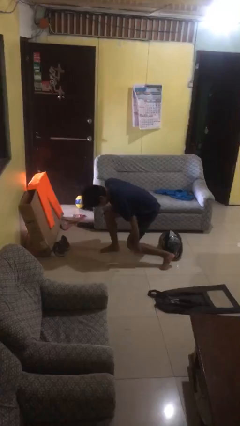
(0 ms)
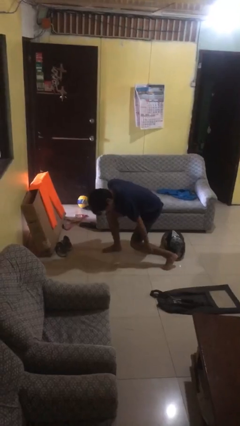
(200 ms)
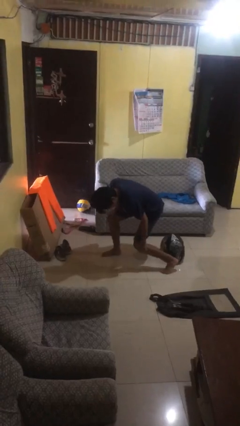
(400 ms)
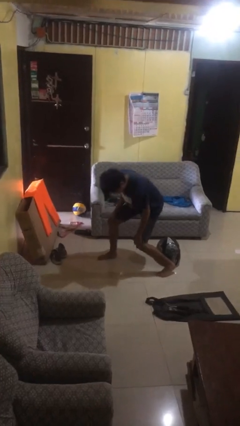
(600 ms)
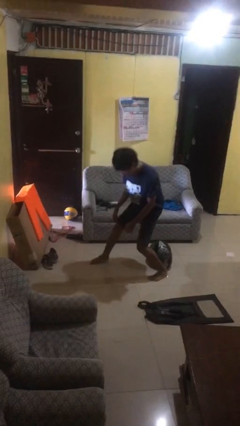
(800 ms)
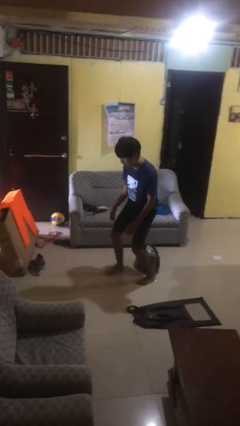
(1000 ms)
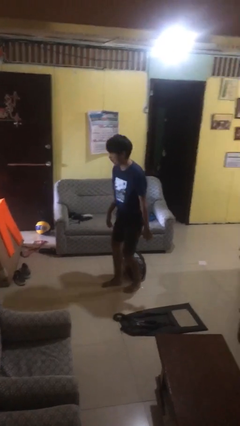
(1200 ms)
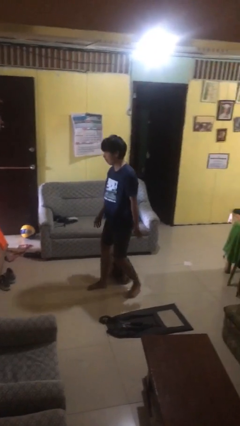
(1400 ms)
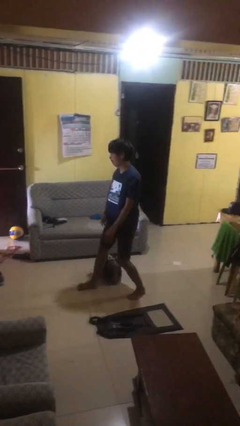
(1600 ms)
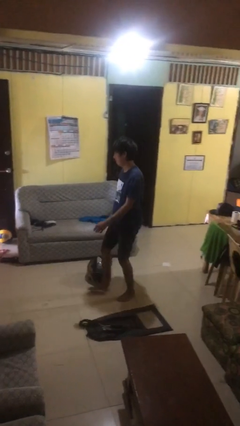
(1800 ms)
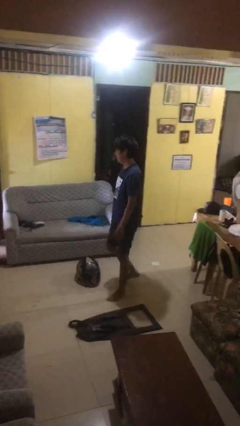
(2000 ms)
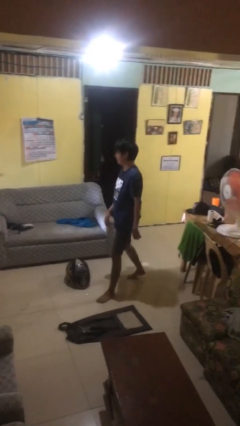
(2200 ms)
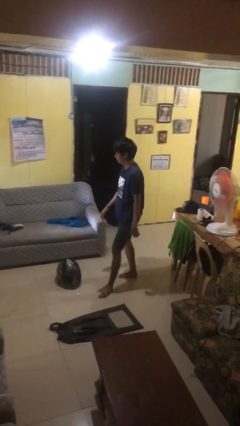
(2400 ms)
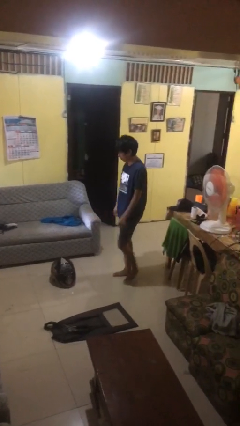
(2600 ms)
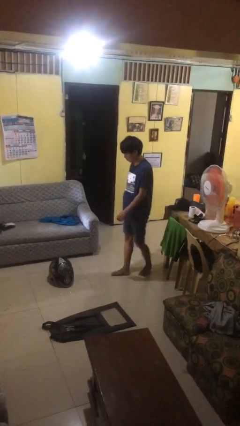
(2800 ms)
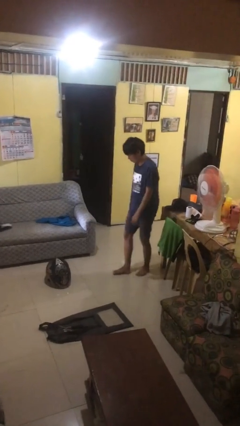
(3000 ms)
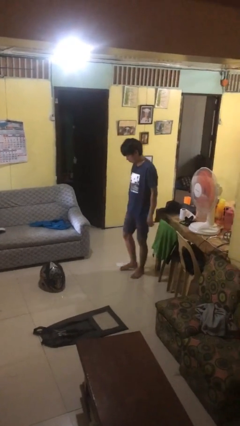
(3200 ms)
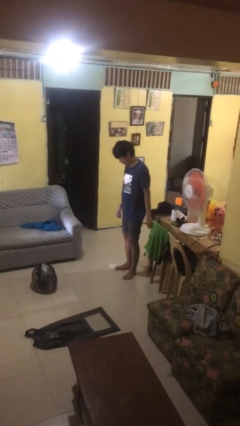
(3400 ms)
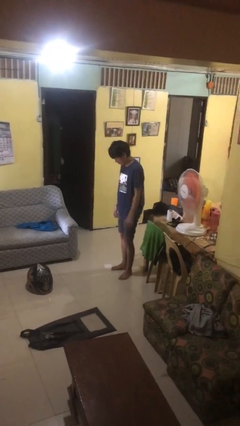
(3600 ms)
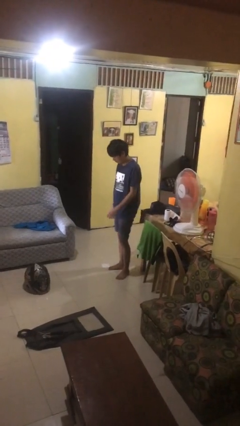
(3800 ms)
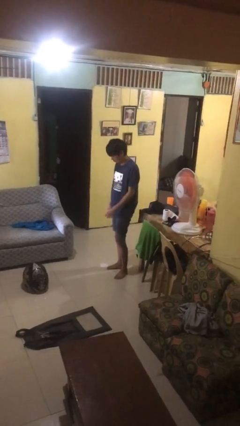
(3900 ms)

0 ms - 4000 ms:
person stands up from floor

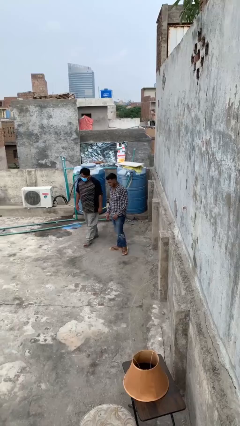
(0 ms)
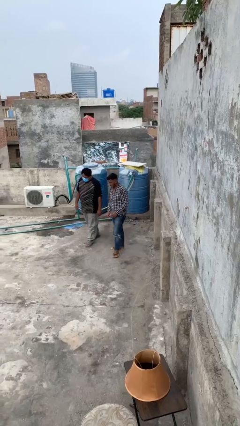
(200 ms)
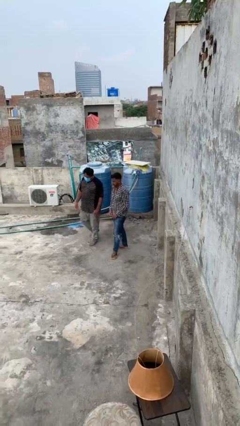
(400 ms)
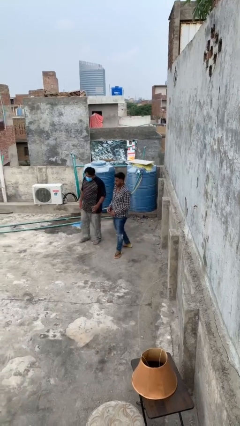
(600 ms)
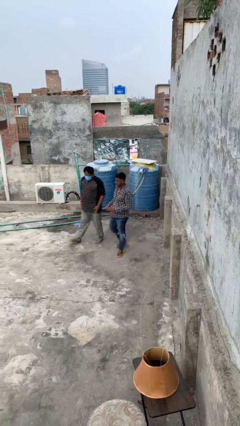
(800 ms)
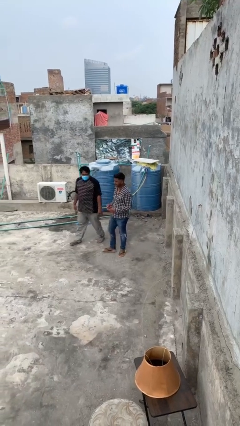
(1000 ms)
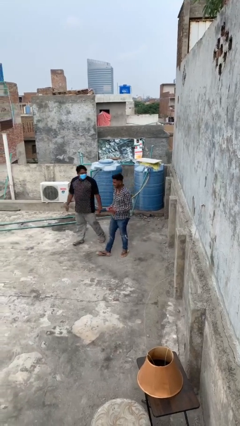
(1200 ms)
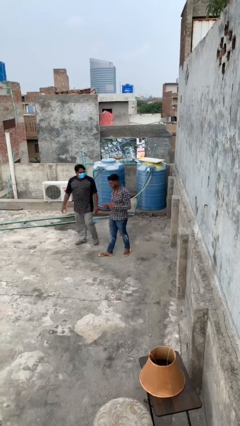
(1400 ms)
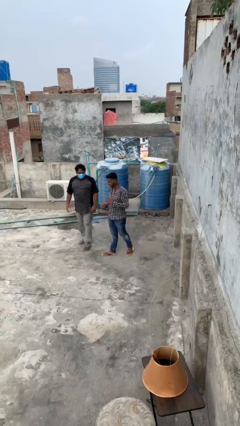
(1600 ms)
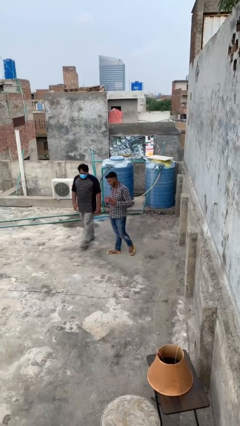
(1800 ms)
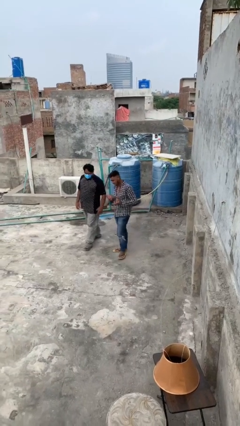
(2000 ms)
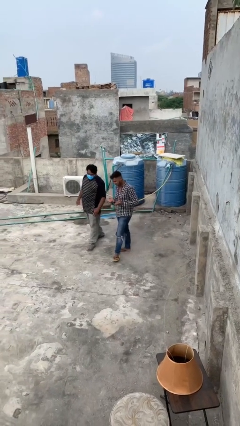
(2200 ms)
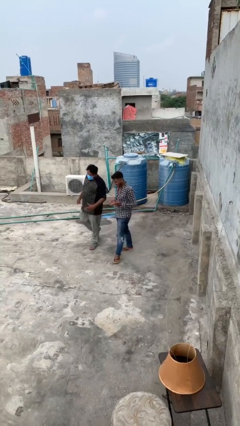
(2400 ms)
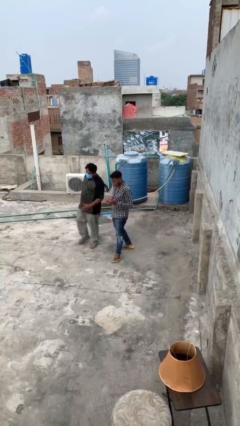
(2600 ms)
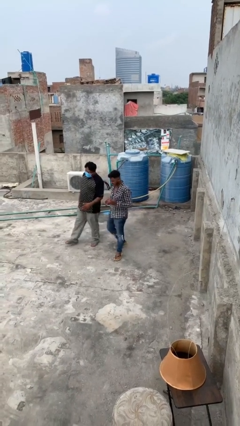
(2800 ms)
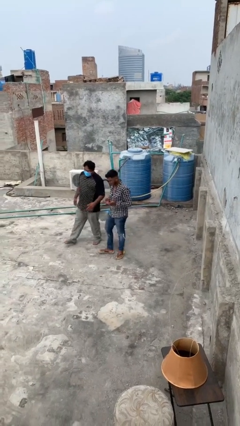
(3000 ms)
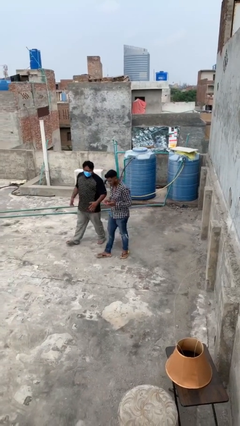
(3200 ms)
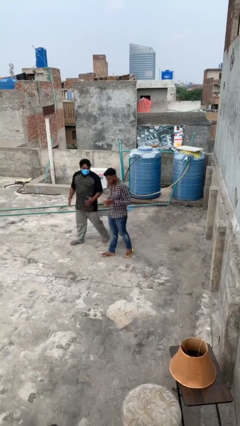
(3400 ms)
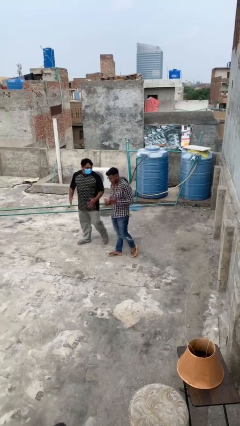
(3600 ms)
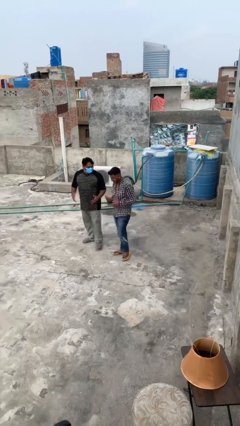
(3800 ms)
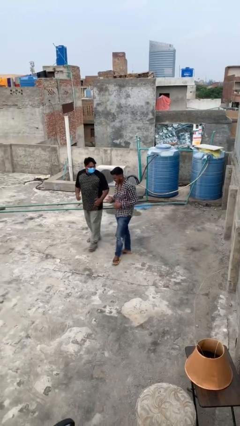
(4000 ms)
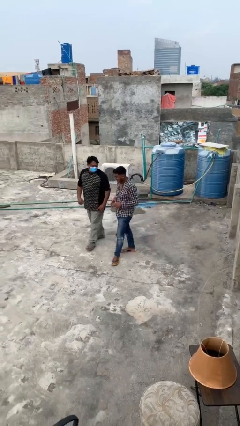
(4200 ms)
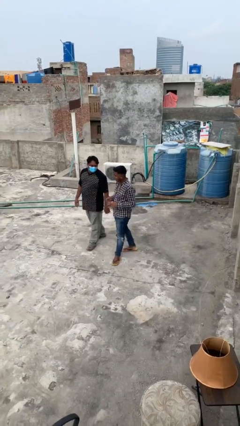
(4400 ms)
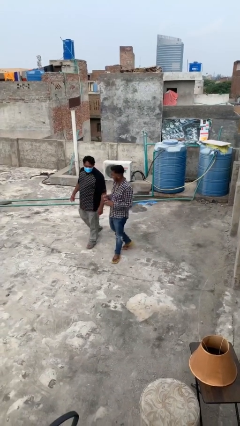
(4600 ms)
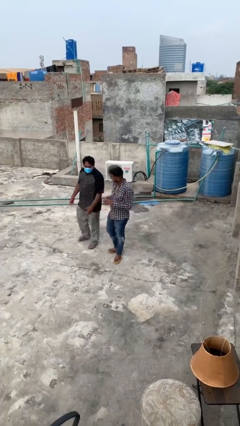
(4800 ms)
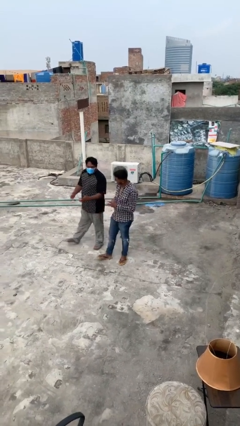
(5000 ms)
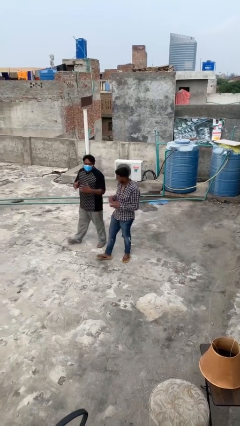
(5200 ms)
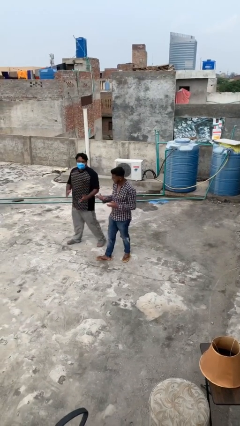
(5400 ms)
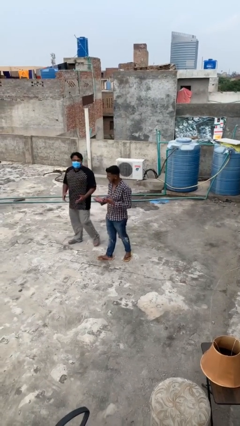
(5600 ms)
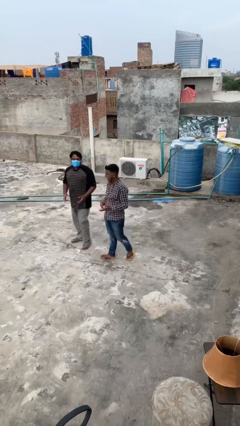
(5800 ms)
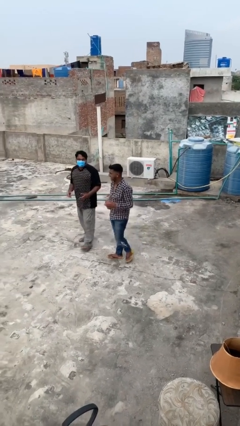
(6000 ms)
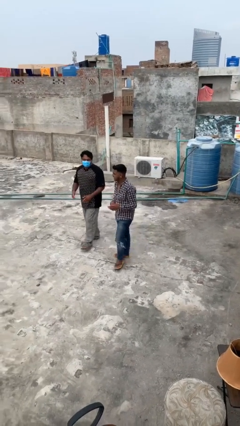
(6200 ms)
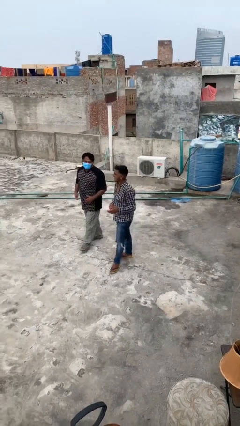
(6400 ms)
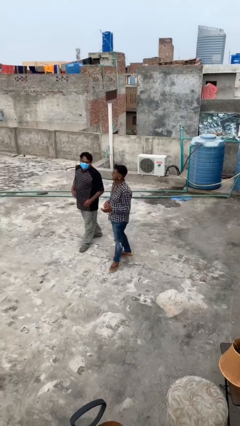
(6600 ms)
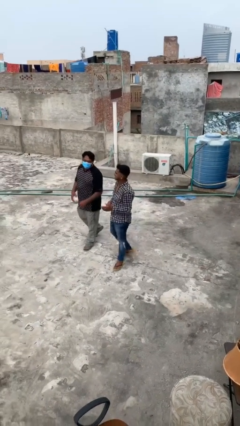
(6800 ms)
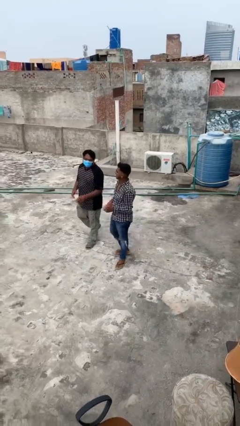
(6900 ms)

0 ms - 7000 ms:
person talks to person

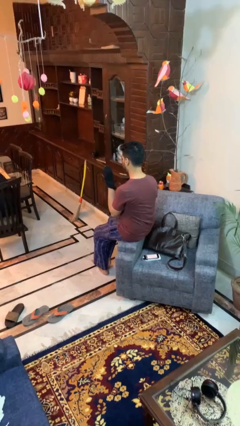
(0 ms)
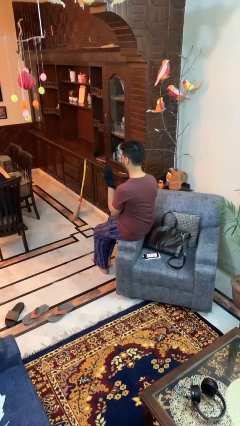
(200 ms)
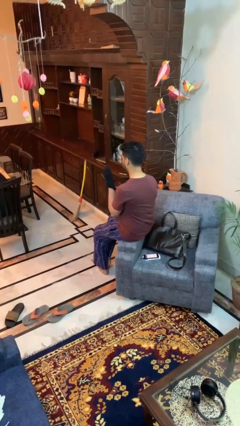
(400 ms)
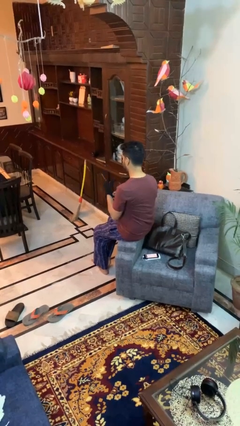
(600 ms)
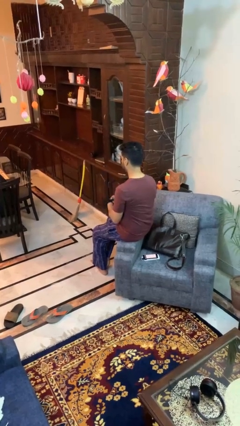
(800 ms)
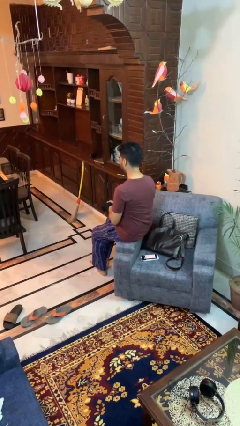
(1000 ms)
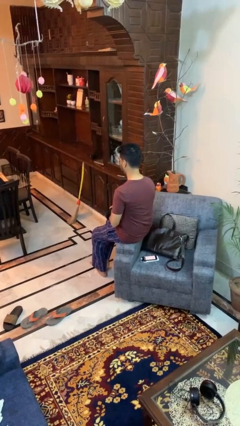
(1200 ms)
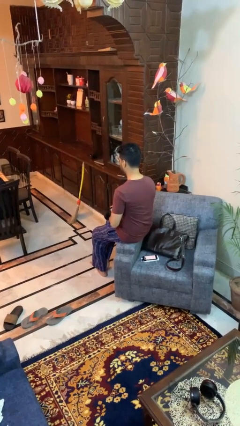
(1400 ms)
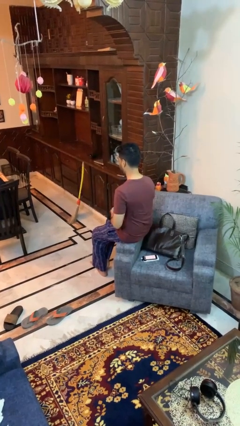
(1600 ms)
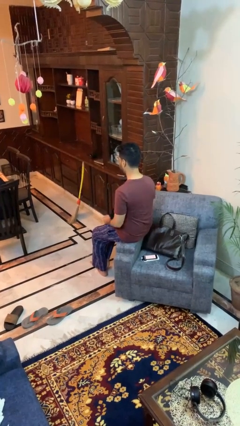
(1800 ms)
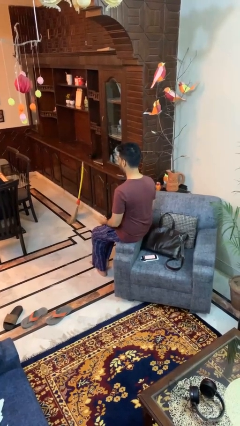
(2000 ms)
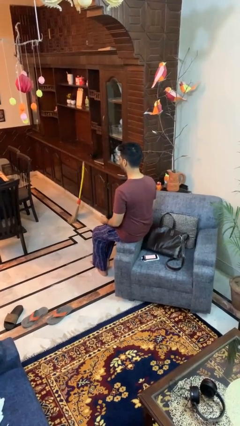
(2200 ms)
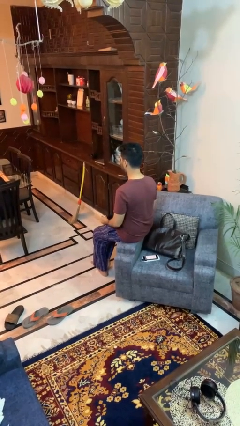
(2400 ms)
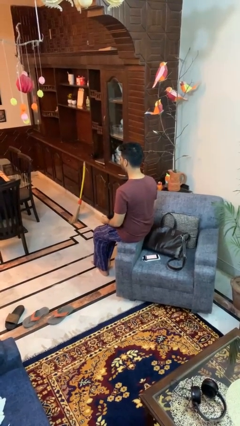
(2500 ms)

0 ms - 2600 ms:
person takes off gloves

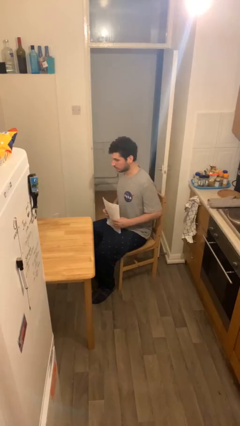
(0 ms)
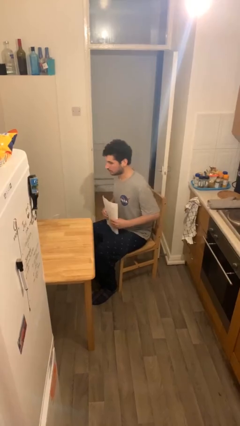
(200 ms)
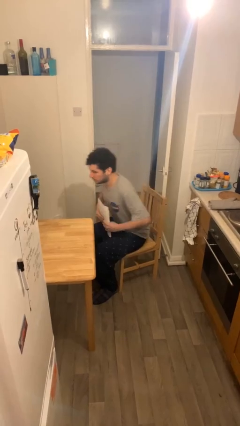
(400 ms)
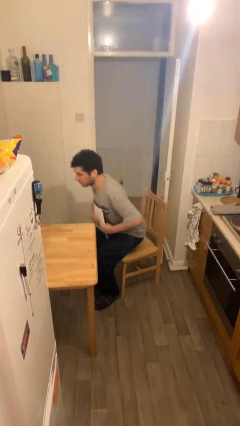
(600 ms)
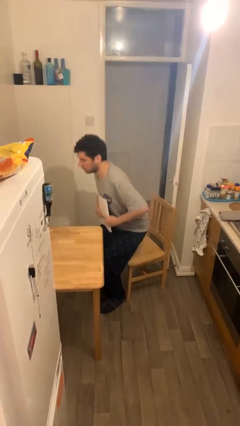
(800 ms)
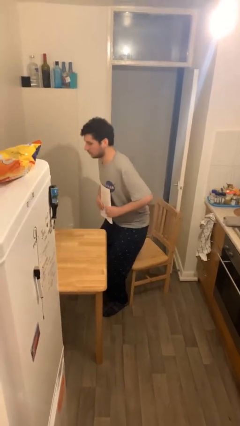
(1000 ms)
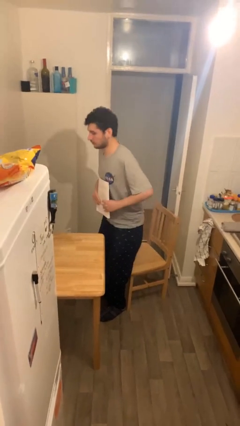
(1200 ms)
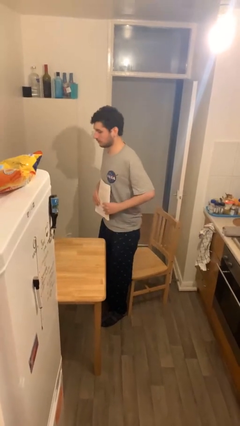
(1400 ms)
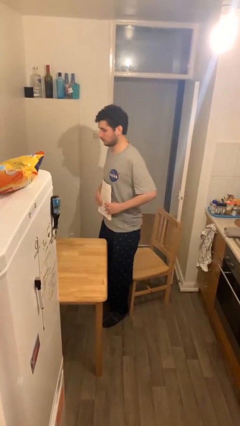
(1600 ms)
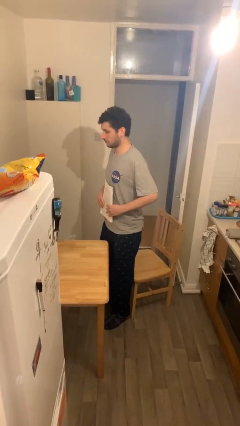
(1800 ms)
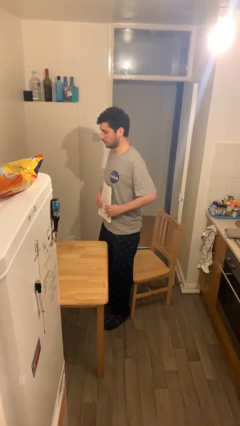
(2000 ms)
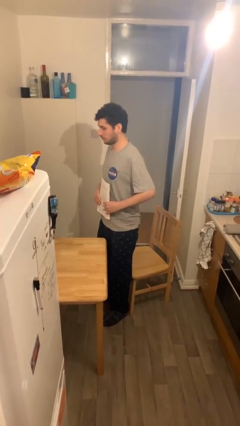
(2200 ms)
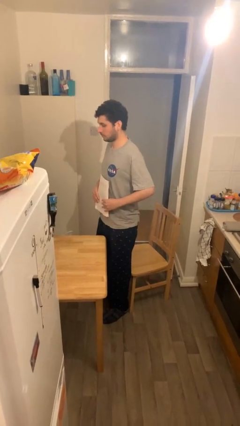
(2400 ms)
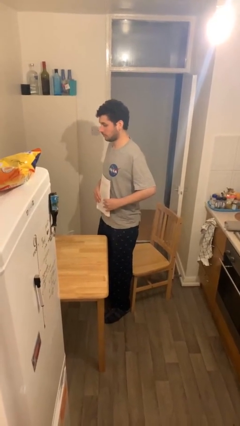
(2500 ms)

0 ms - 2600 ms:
person stands up

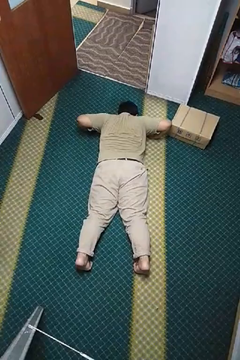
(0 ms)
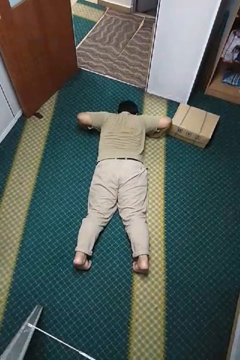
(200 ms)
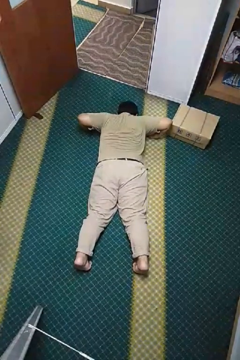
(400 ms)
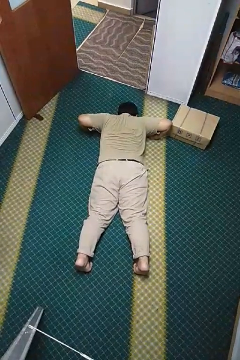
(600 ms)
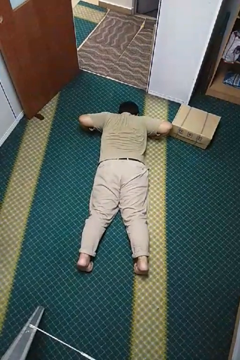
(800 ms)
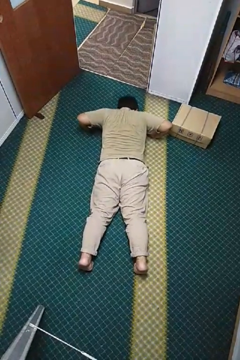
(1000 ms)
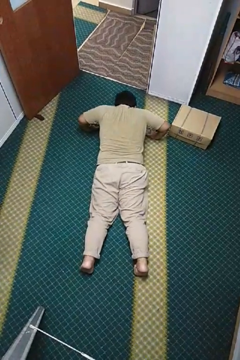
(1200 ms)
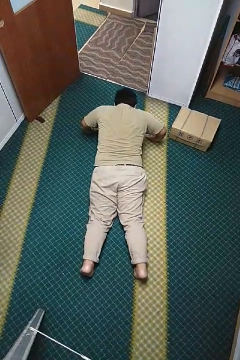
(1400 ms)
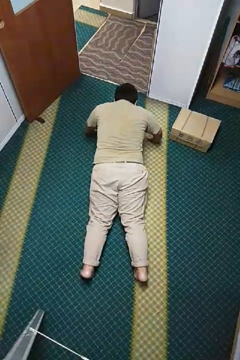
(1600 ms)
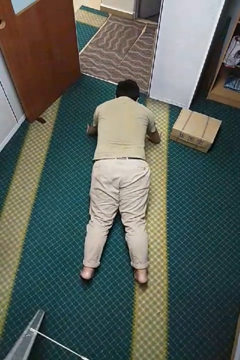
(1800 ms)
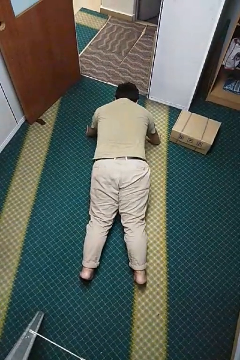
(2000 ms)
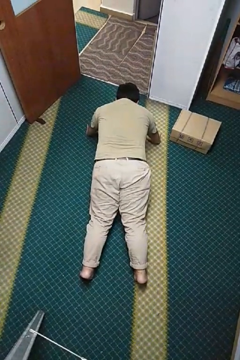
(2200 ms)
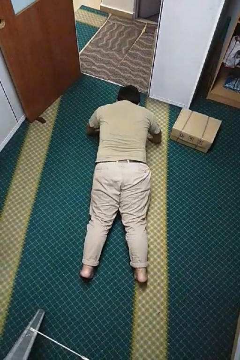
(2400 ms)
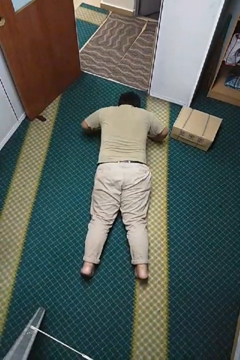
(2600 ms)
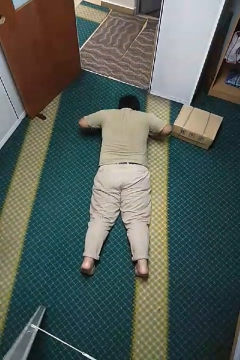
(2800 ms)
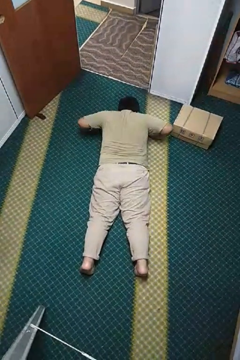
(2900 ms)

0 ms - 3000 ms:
person exercises with pushup
